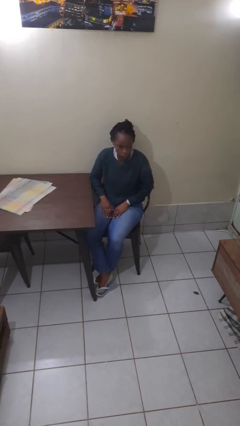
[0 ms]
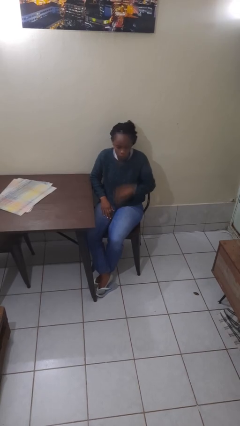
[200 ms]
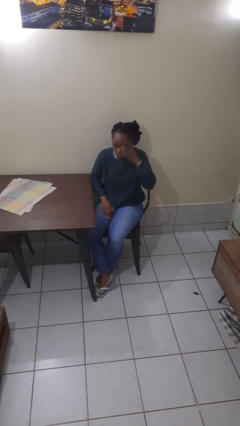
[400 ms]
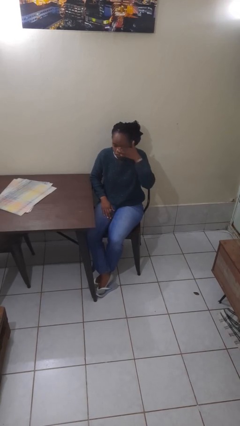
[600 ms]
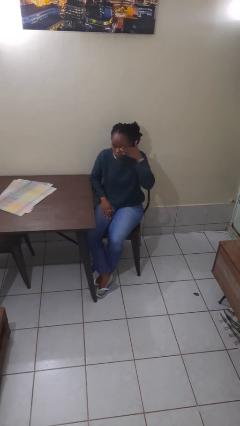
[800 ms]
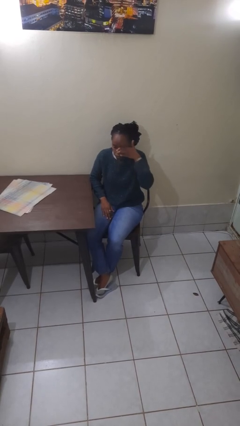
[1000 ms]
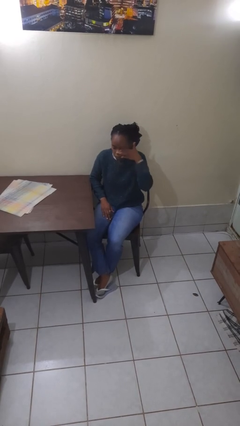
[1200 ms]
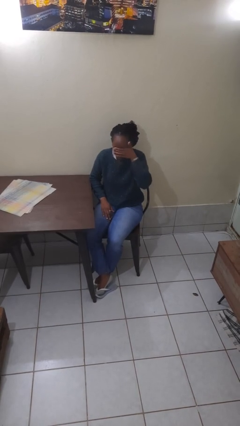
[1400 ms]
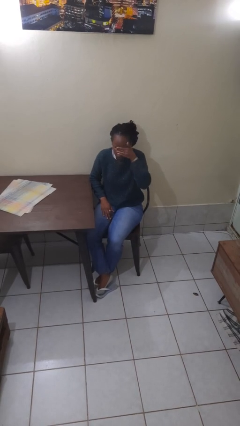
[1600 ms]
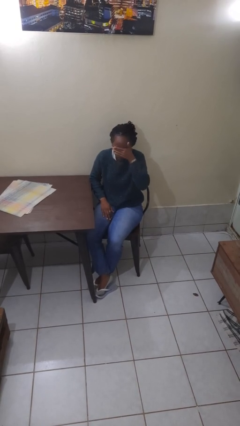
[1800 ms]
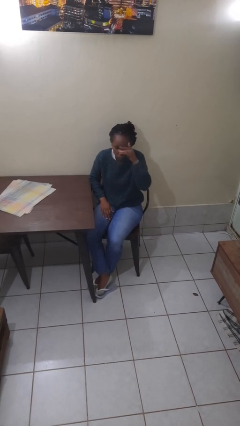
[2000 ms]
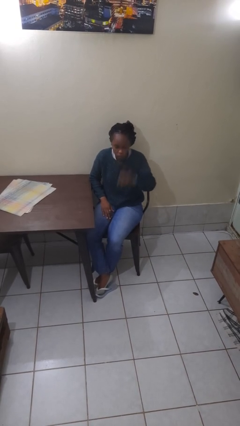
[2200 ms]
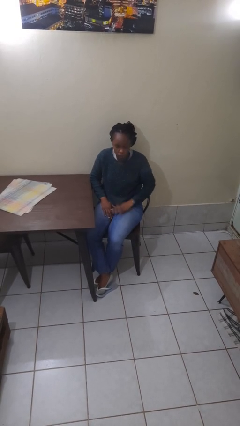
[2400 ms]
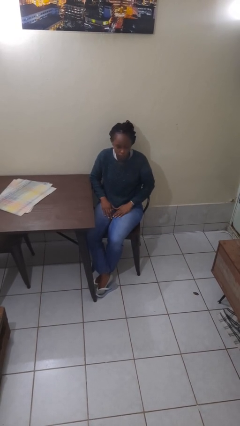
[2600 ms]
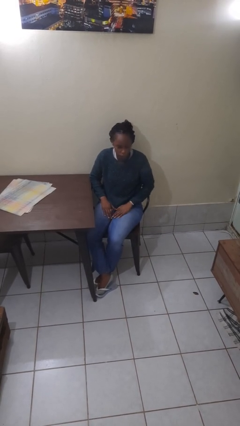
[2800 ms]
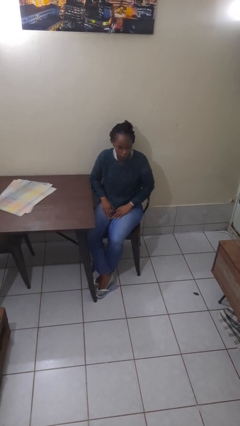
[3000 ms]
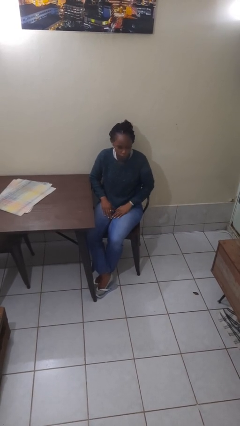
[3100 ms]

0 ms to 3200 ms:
person rubs eyes

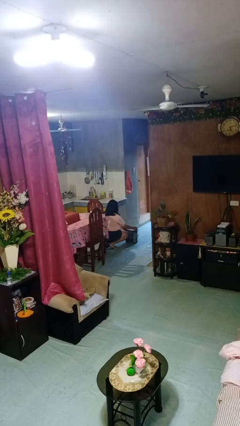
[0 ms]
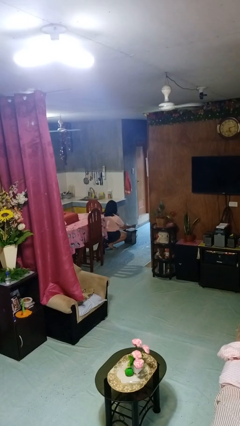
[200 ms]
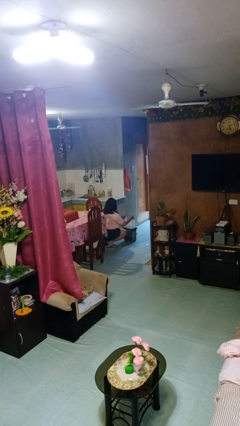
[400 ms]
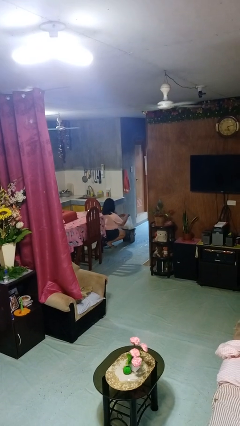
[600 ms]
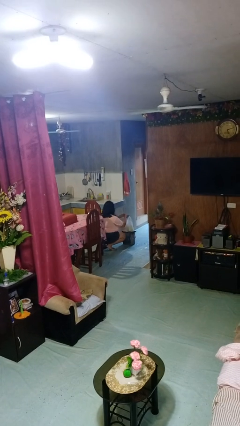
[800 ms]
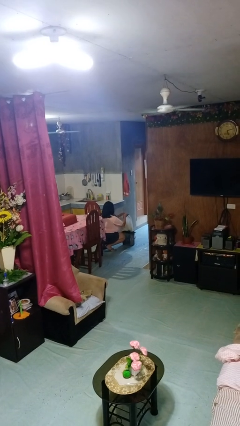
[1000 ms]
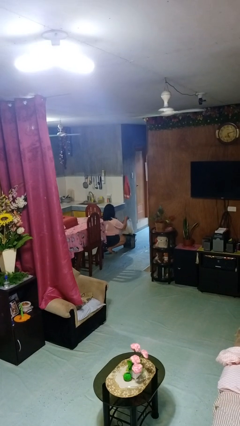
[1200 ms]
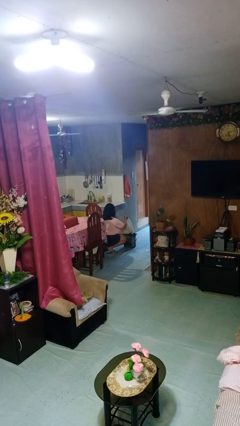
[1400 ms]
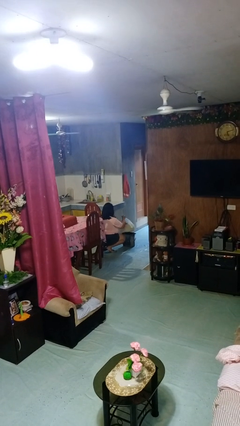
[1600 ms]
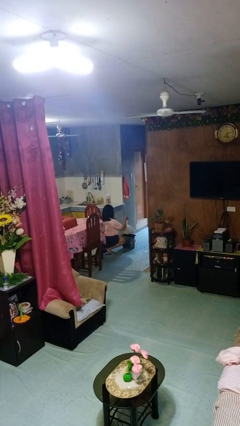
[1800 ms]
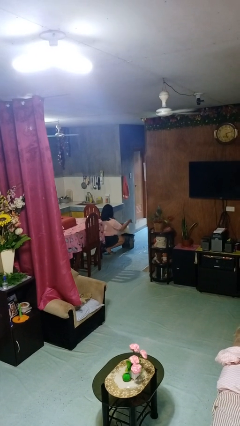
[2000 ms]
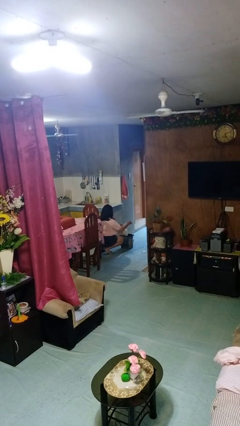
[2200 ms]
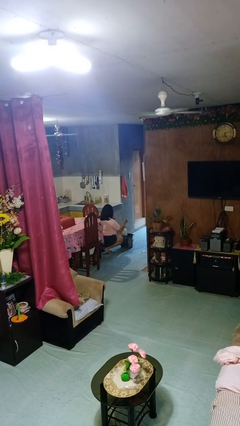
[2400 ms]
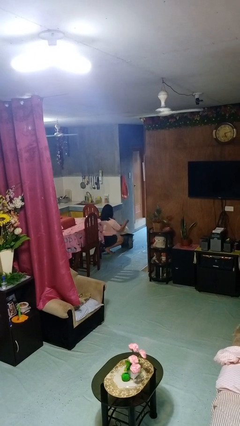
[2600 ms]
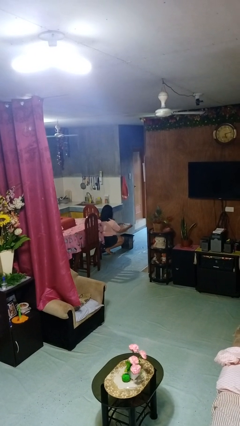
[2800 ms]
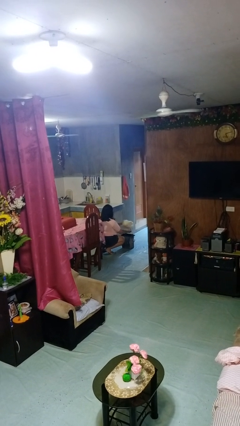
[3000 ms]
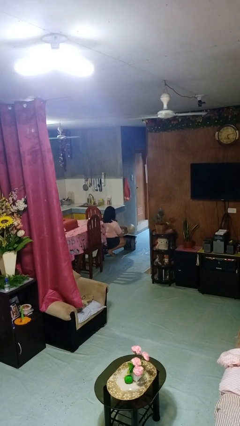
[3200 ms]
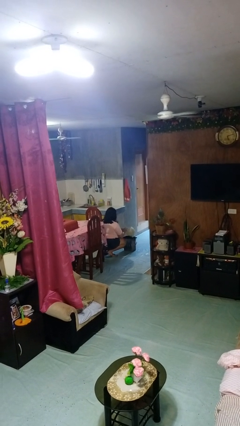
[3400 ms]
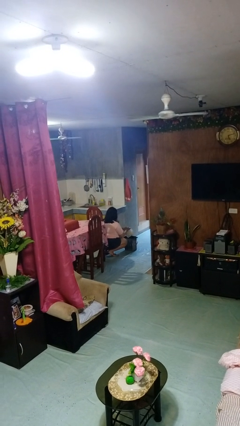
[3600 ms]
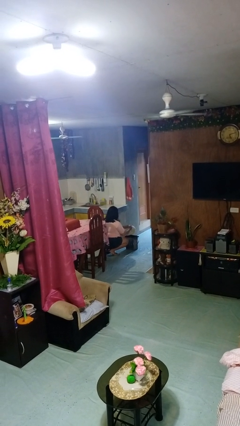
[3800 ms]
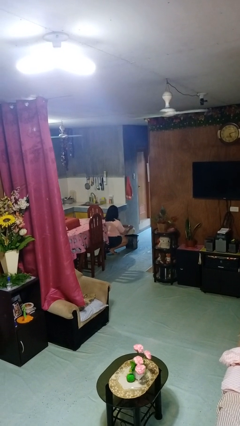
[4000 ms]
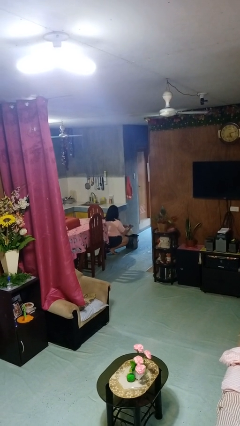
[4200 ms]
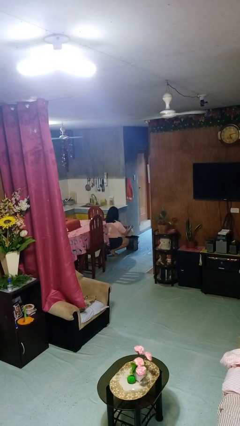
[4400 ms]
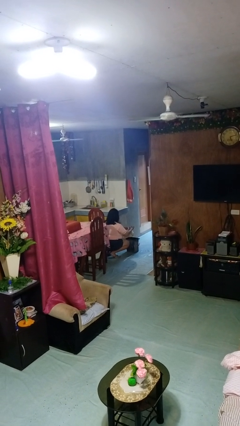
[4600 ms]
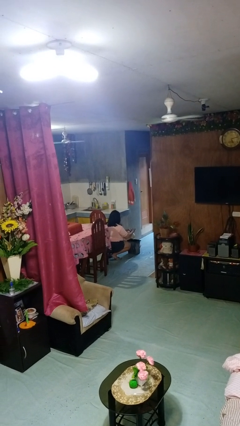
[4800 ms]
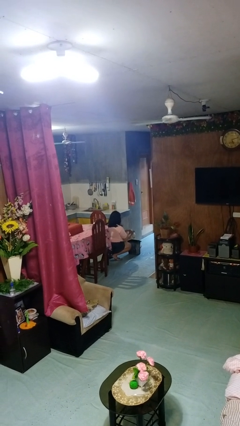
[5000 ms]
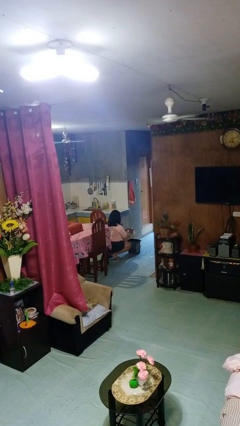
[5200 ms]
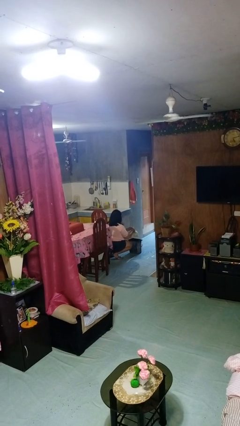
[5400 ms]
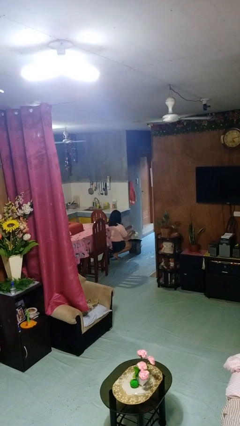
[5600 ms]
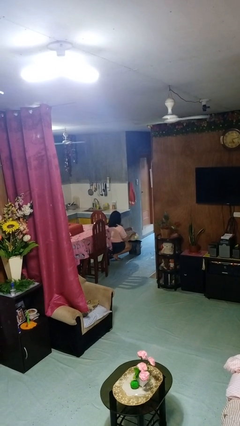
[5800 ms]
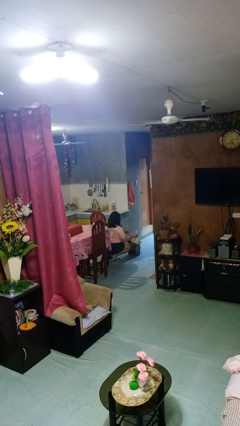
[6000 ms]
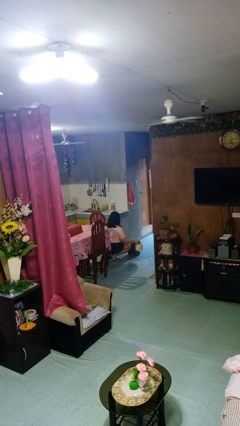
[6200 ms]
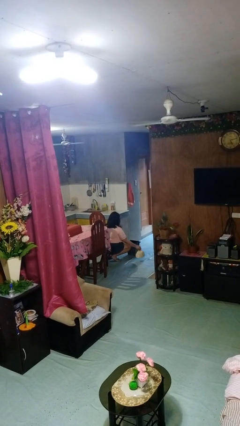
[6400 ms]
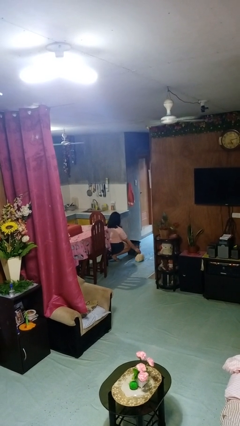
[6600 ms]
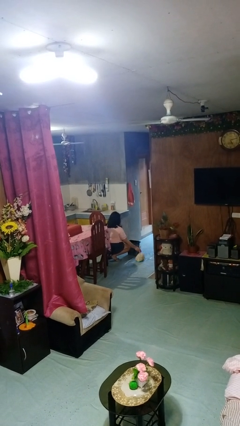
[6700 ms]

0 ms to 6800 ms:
person removes trashbag from trashcan

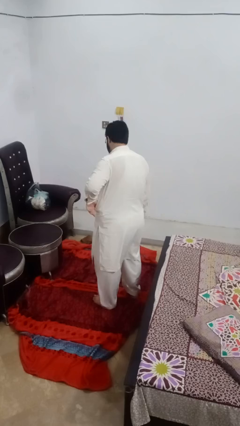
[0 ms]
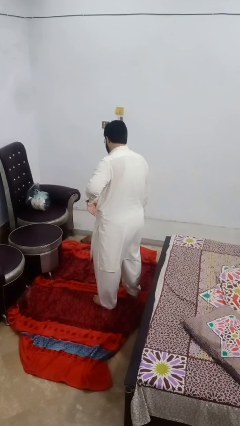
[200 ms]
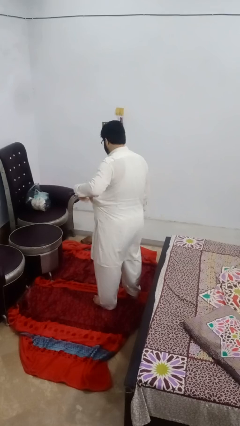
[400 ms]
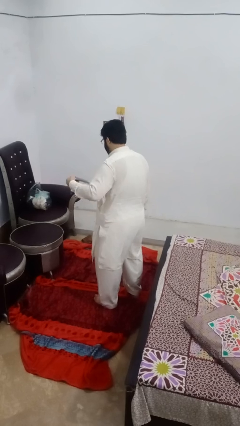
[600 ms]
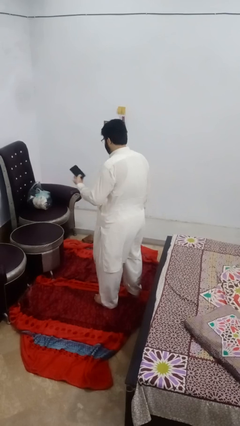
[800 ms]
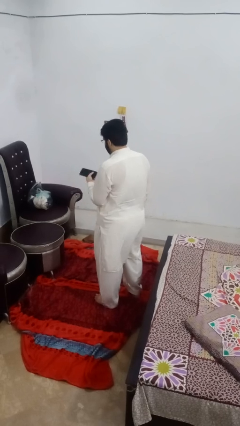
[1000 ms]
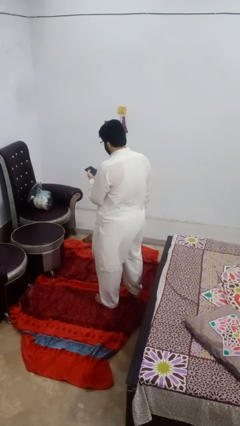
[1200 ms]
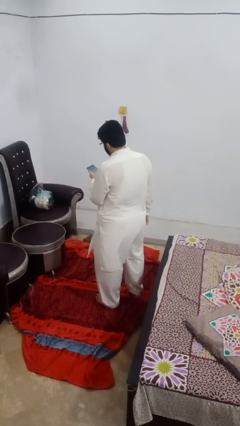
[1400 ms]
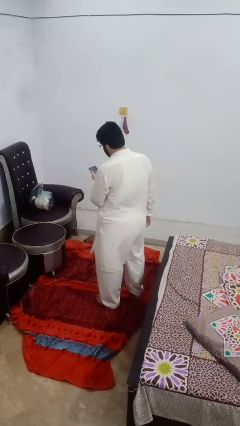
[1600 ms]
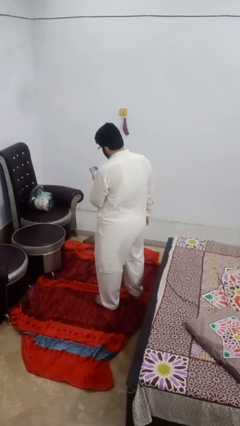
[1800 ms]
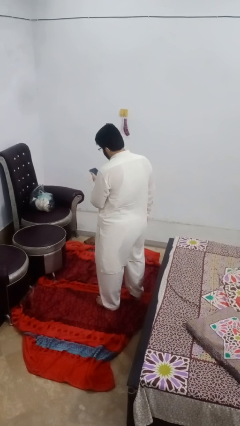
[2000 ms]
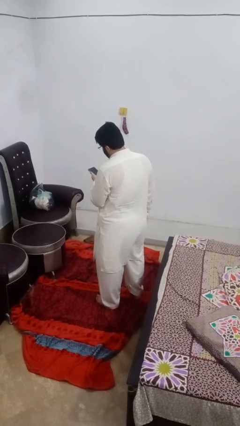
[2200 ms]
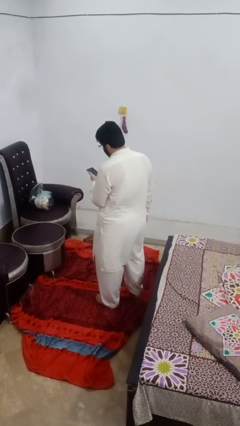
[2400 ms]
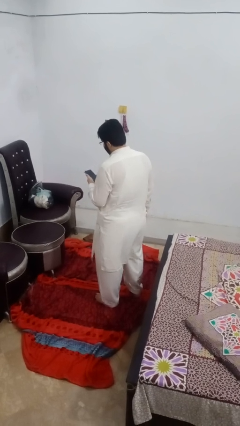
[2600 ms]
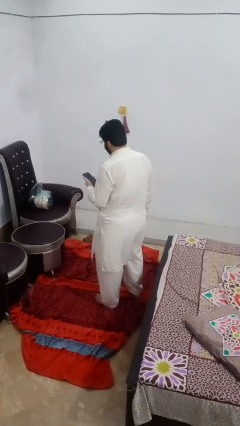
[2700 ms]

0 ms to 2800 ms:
person takes phone from pocket

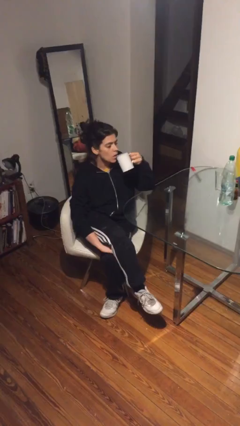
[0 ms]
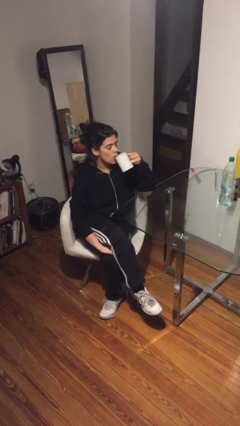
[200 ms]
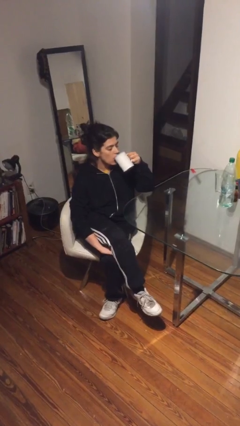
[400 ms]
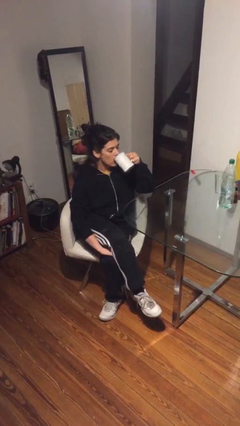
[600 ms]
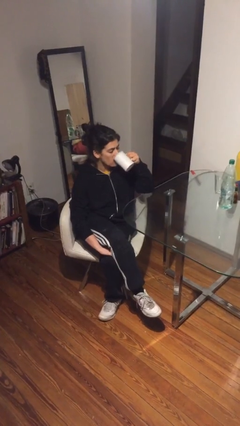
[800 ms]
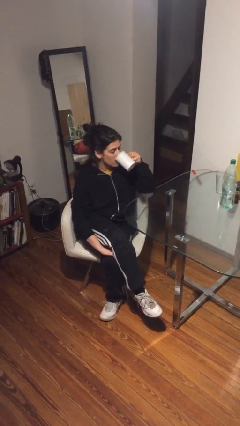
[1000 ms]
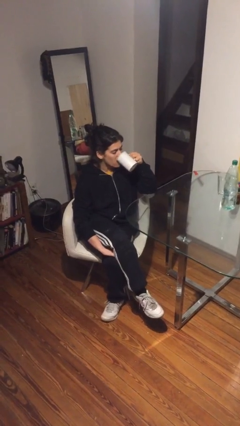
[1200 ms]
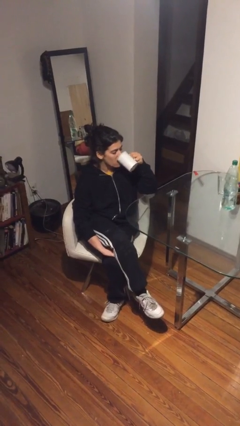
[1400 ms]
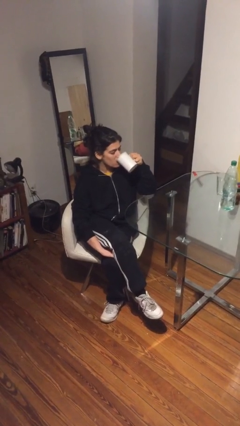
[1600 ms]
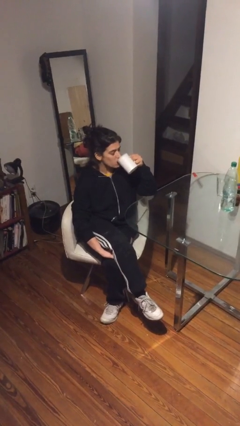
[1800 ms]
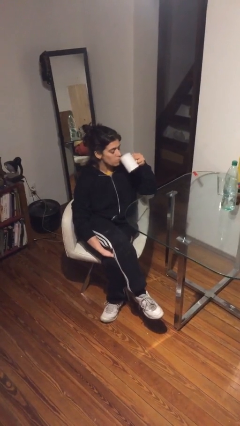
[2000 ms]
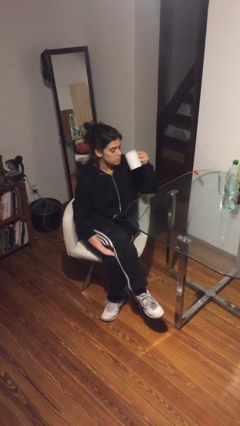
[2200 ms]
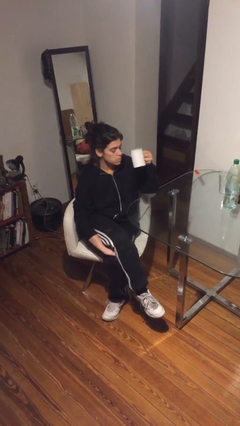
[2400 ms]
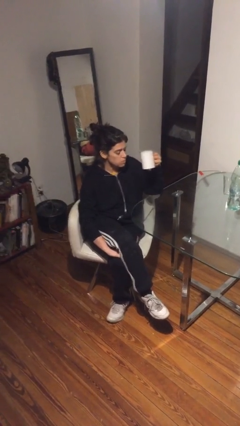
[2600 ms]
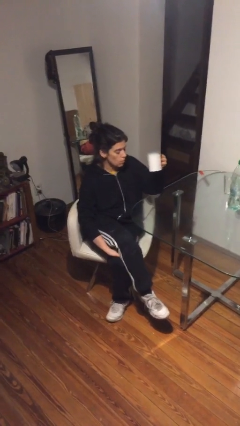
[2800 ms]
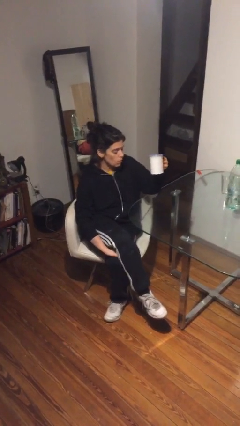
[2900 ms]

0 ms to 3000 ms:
person drinks from mug

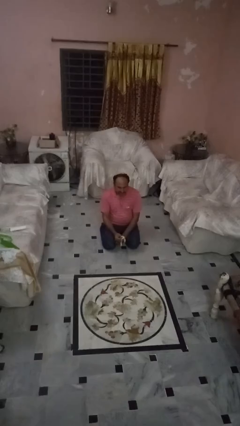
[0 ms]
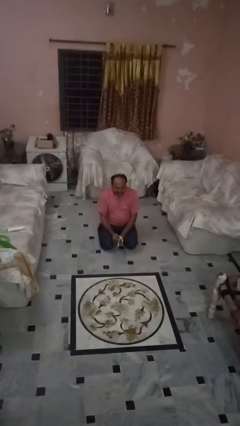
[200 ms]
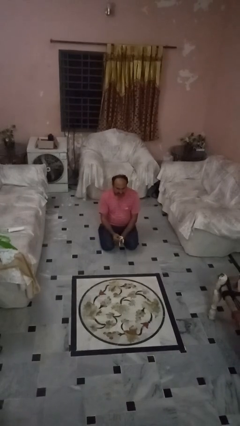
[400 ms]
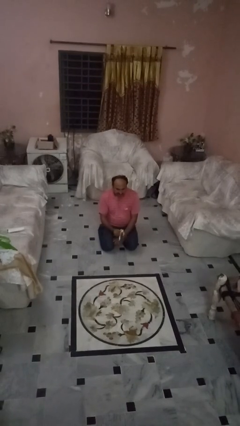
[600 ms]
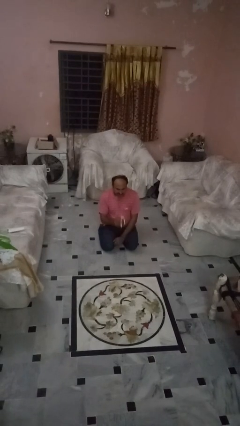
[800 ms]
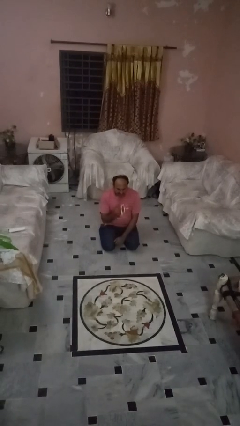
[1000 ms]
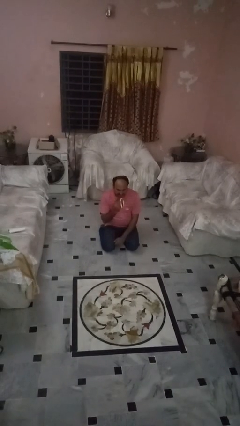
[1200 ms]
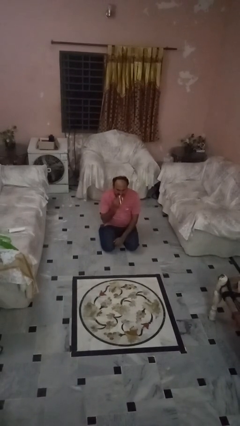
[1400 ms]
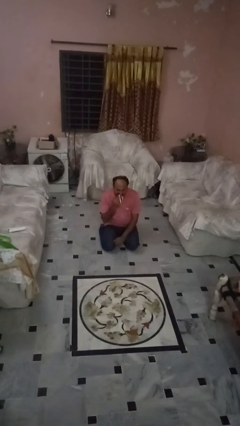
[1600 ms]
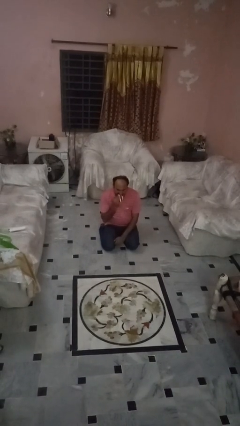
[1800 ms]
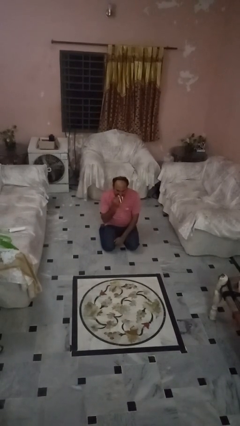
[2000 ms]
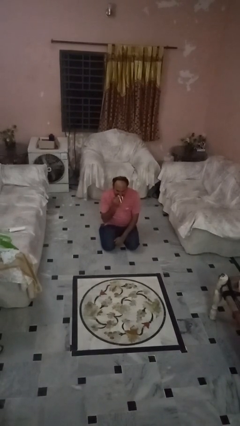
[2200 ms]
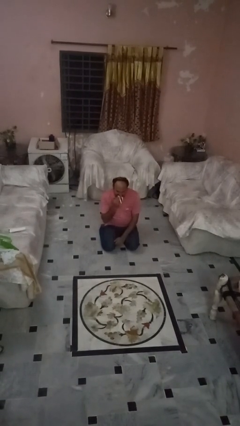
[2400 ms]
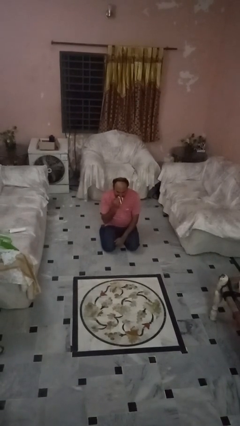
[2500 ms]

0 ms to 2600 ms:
person eats banana
